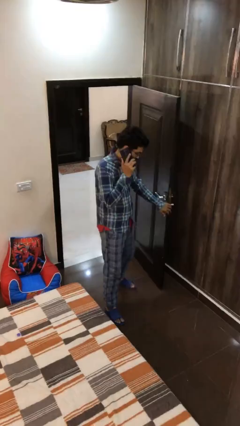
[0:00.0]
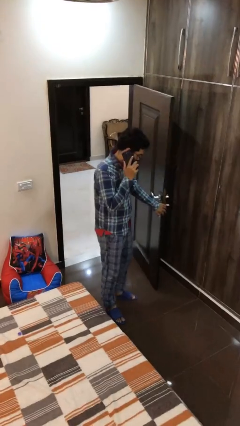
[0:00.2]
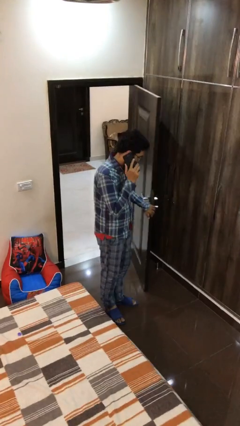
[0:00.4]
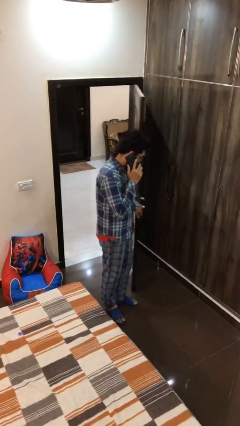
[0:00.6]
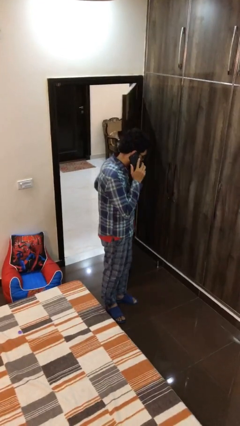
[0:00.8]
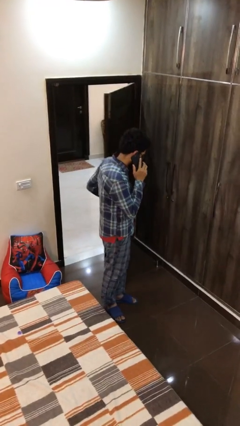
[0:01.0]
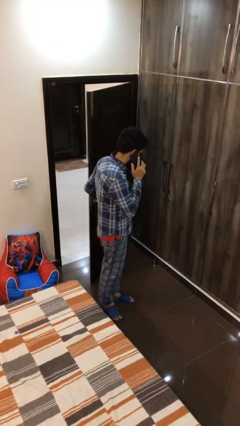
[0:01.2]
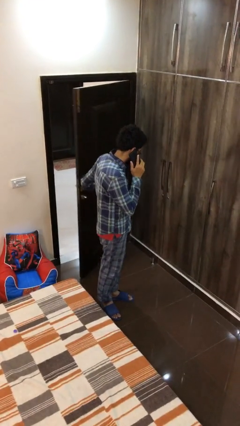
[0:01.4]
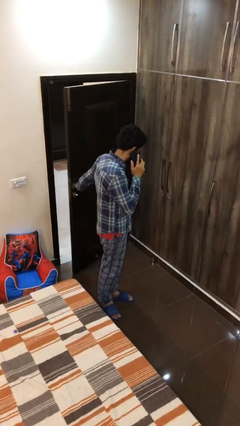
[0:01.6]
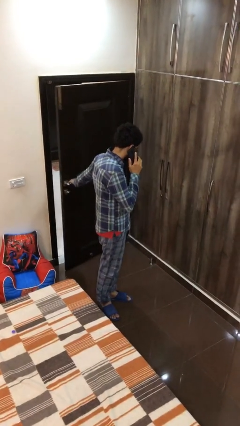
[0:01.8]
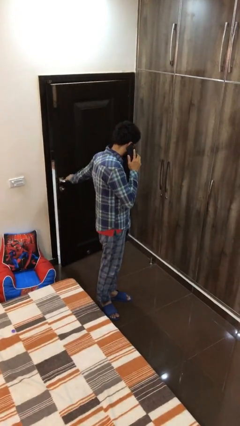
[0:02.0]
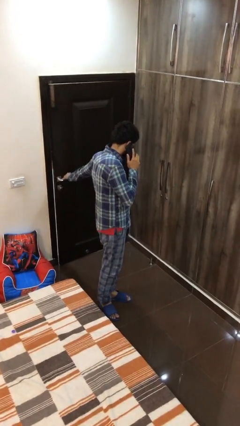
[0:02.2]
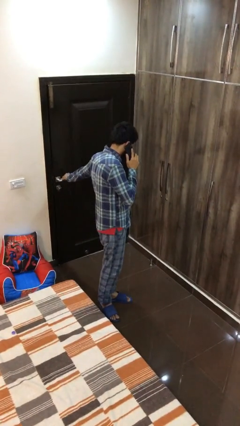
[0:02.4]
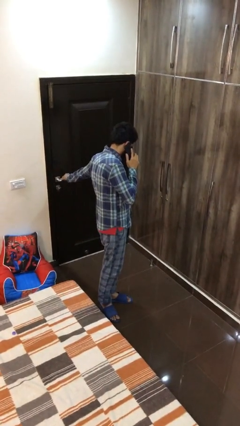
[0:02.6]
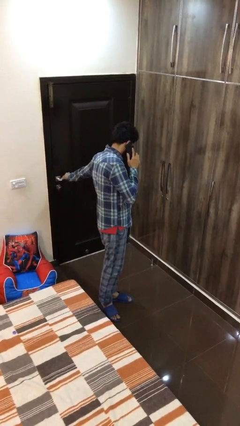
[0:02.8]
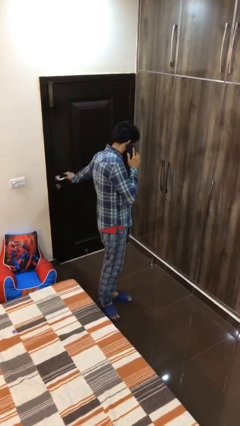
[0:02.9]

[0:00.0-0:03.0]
person closes facility door

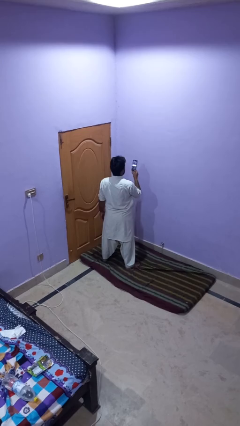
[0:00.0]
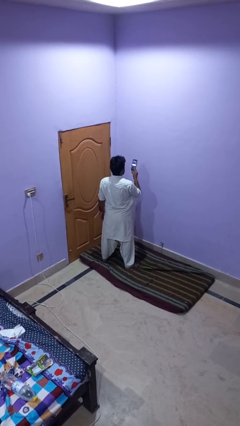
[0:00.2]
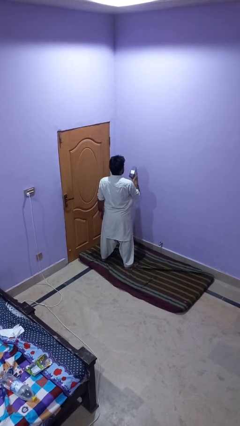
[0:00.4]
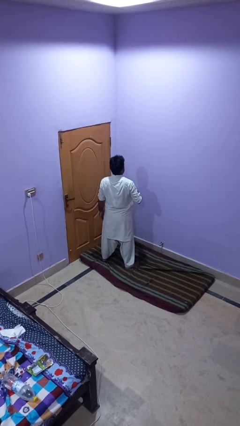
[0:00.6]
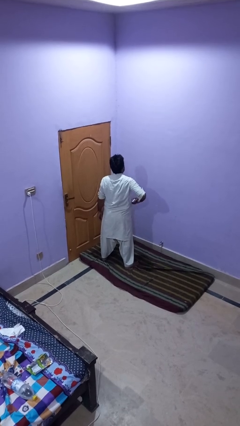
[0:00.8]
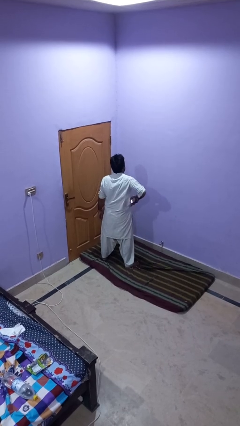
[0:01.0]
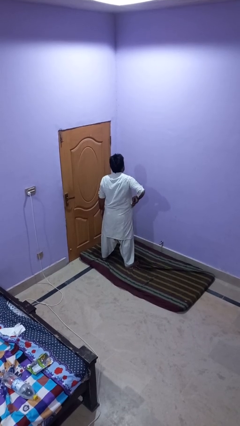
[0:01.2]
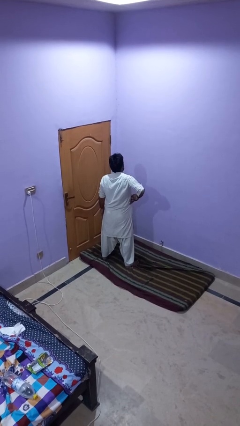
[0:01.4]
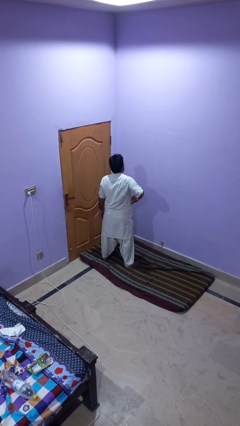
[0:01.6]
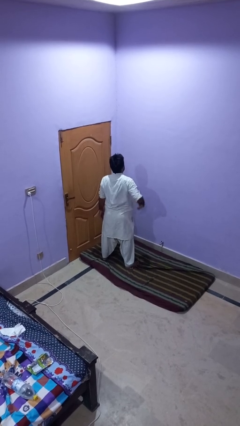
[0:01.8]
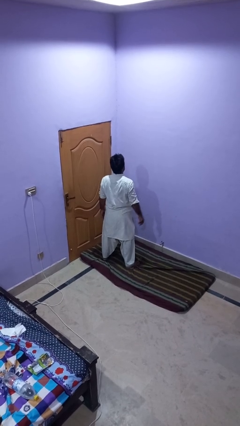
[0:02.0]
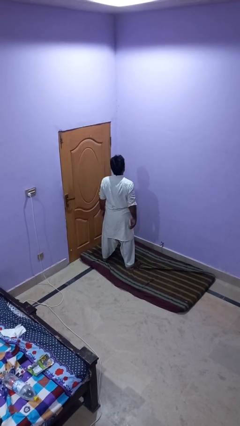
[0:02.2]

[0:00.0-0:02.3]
person puts phone into pocket

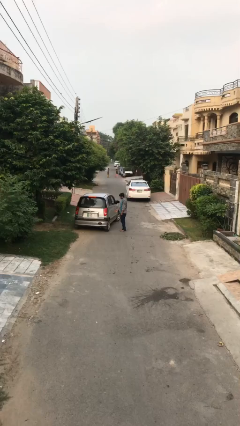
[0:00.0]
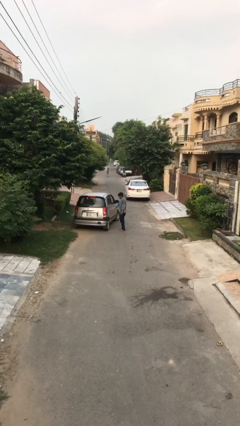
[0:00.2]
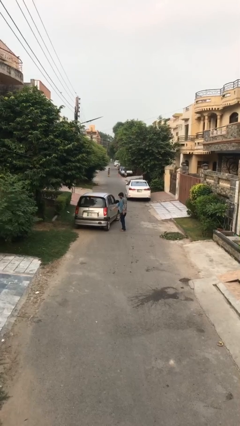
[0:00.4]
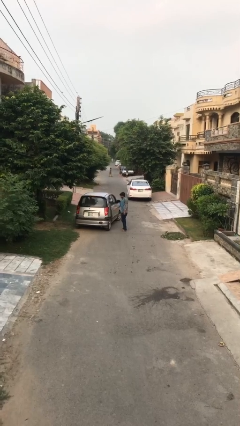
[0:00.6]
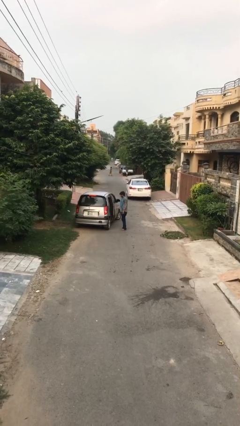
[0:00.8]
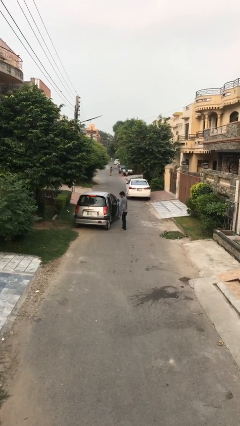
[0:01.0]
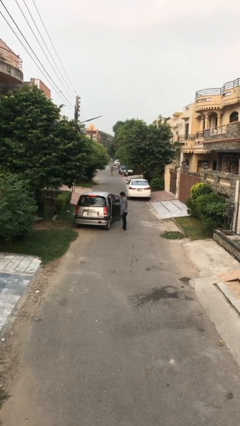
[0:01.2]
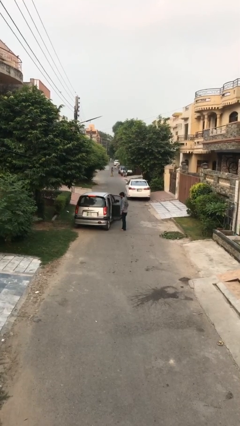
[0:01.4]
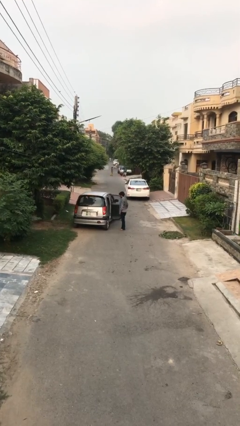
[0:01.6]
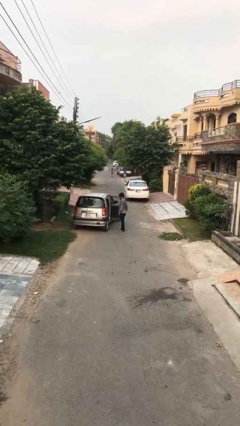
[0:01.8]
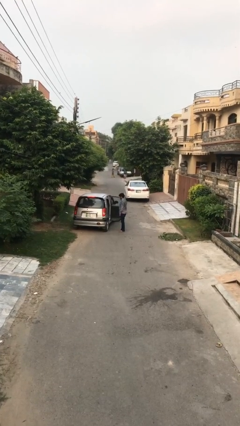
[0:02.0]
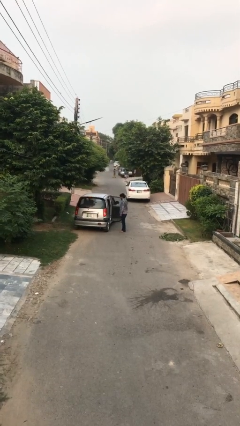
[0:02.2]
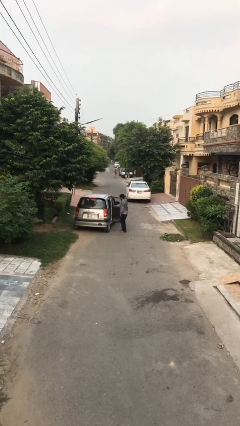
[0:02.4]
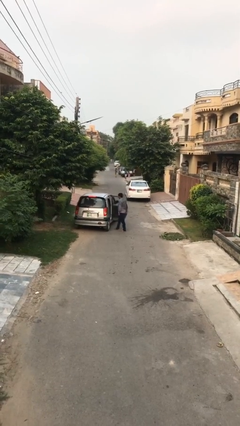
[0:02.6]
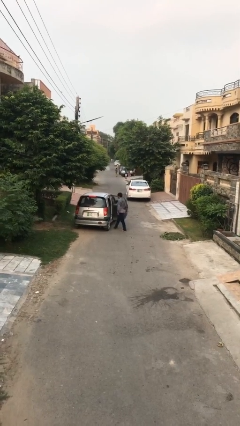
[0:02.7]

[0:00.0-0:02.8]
person opens car door

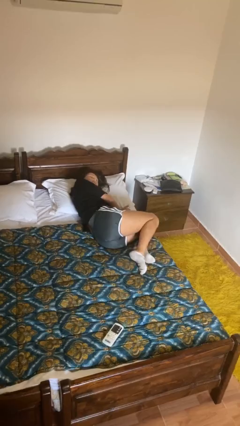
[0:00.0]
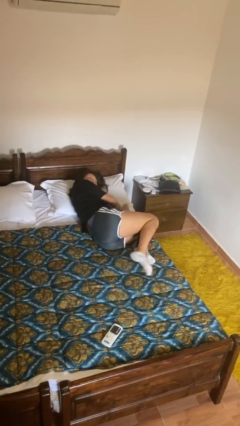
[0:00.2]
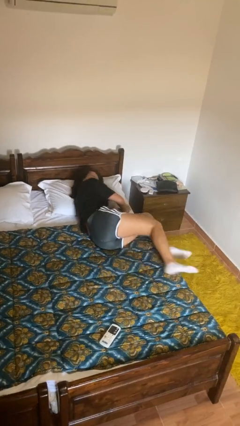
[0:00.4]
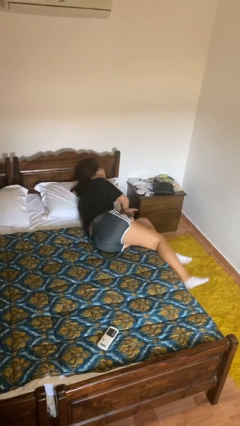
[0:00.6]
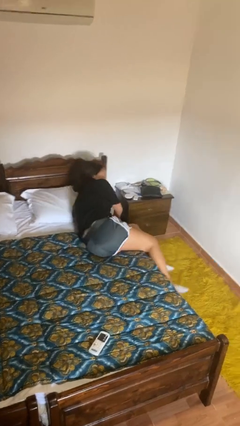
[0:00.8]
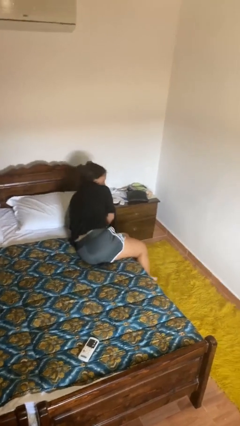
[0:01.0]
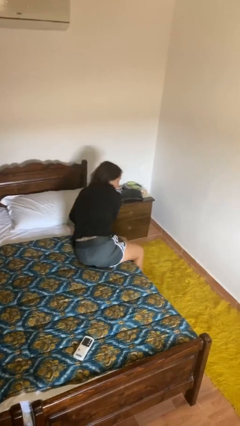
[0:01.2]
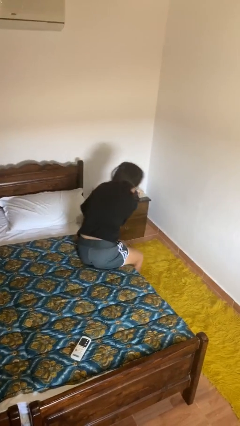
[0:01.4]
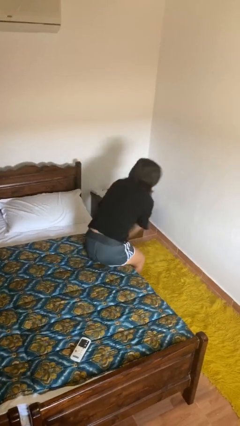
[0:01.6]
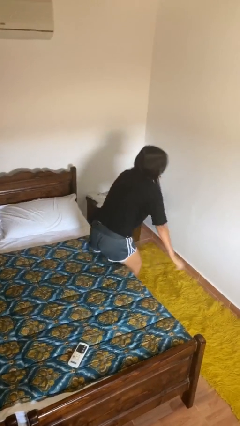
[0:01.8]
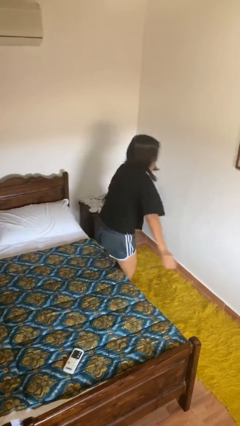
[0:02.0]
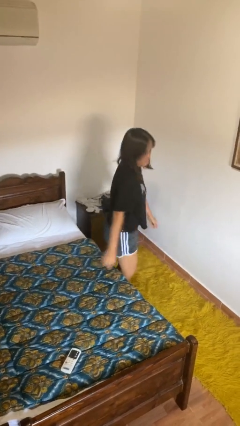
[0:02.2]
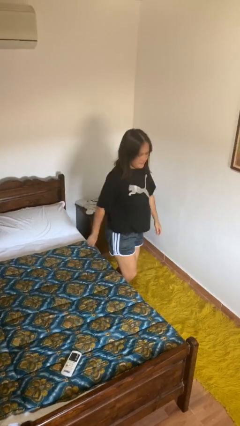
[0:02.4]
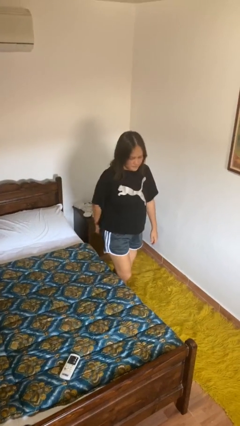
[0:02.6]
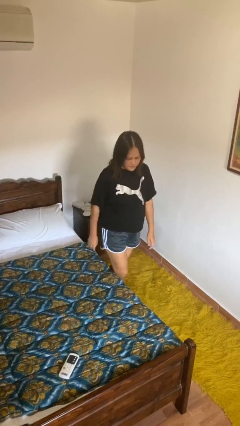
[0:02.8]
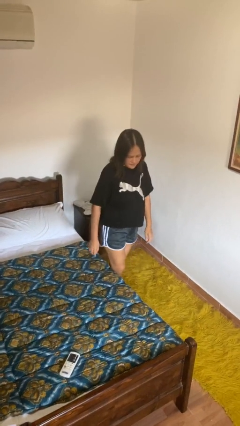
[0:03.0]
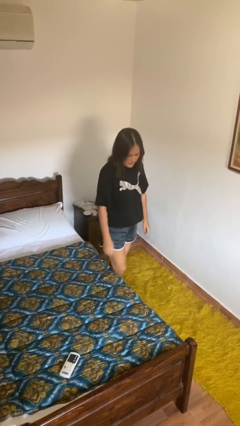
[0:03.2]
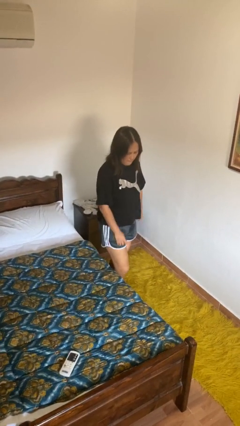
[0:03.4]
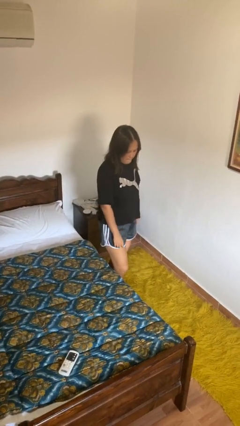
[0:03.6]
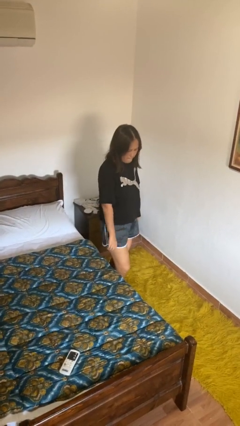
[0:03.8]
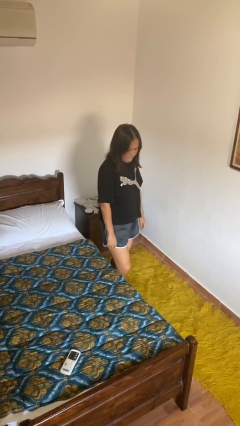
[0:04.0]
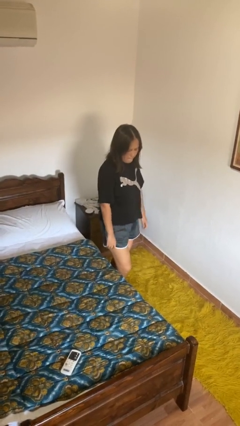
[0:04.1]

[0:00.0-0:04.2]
person stands up

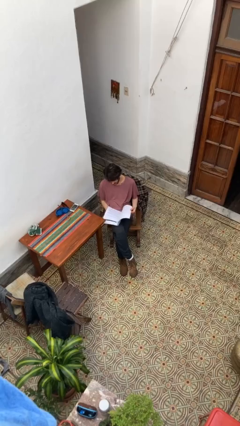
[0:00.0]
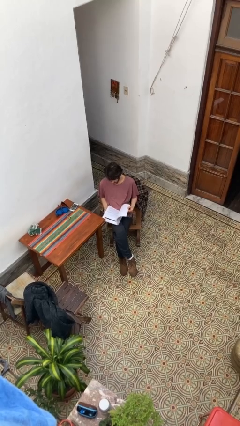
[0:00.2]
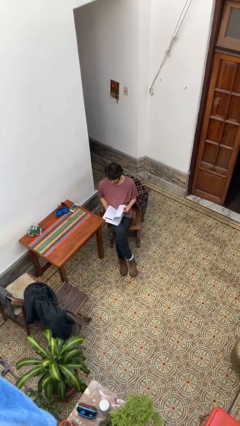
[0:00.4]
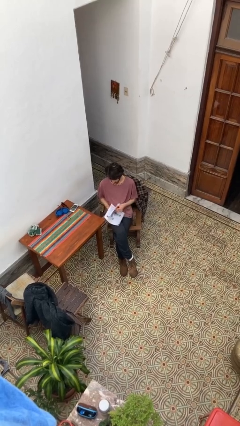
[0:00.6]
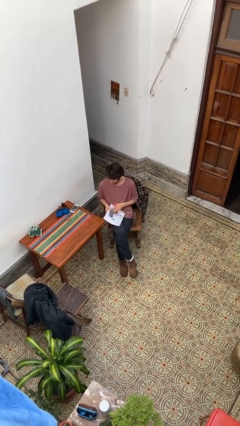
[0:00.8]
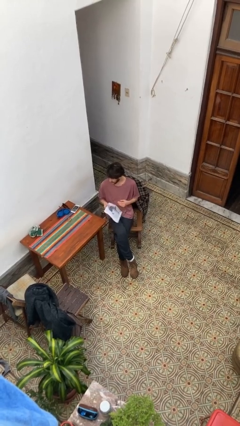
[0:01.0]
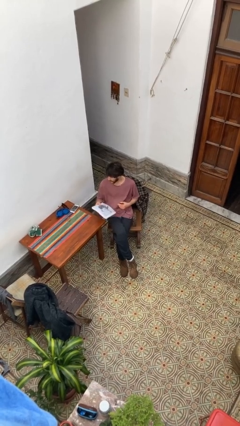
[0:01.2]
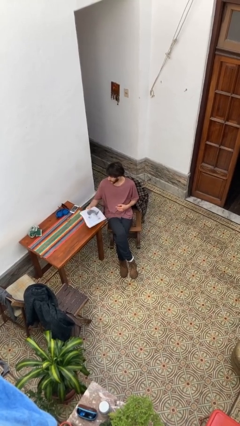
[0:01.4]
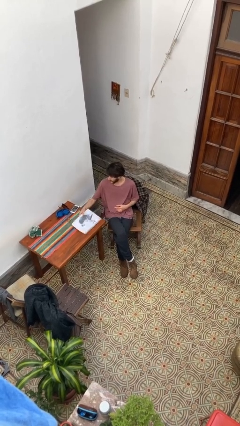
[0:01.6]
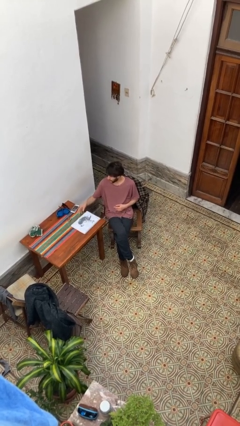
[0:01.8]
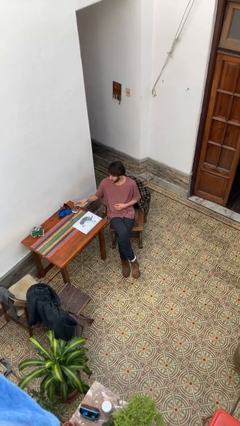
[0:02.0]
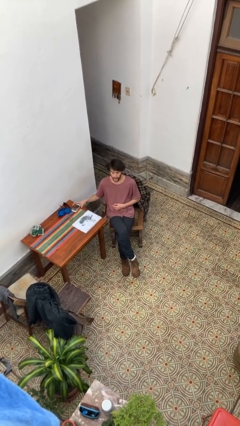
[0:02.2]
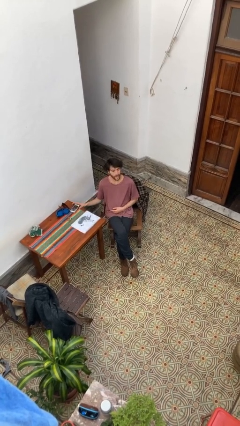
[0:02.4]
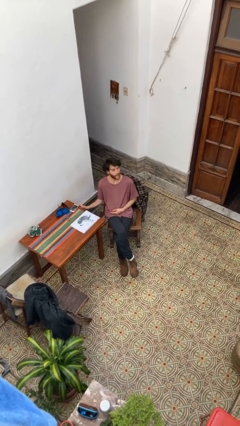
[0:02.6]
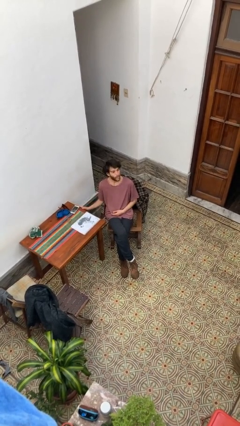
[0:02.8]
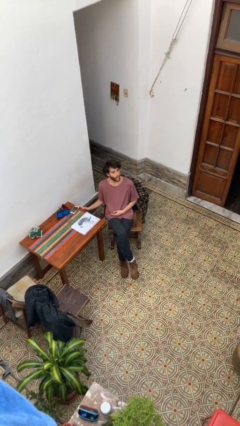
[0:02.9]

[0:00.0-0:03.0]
person puts down object on table

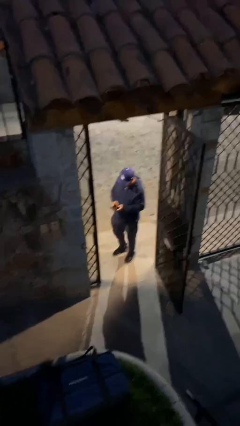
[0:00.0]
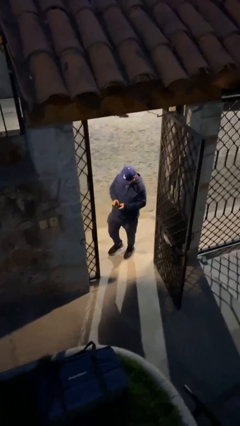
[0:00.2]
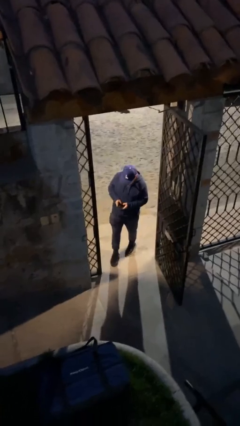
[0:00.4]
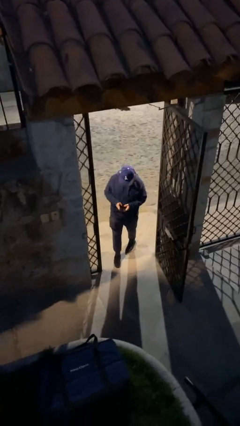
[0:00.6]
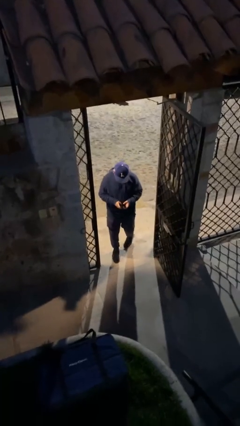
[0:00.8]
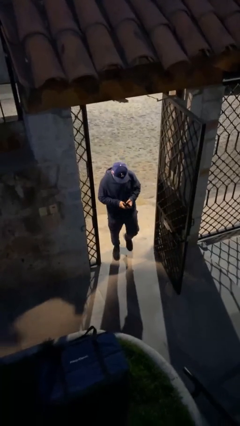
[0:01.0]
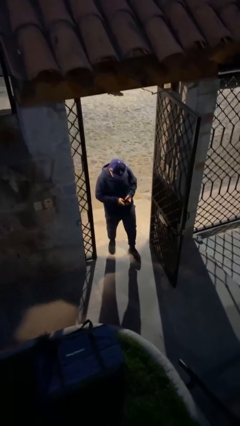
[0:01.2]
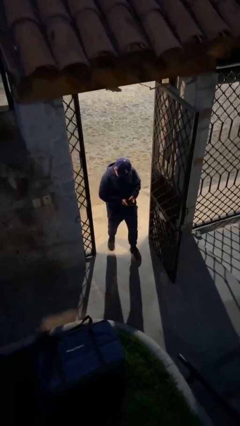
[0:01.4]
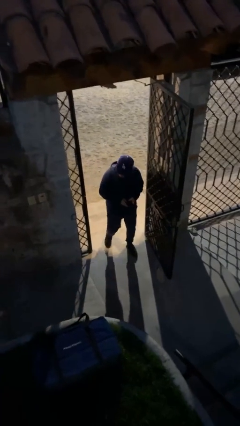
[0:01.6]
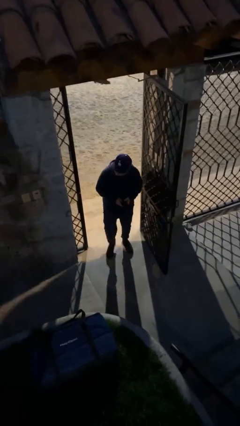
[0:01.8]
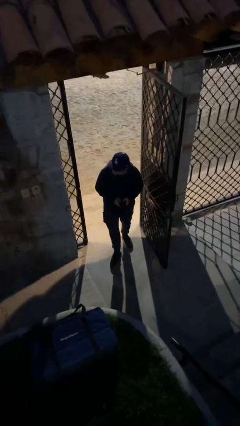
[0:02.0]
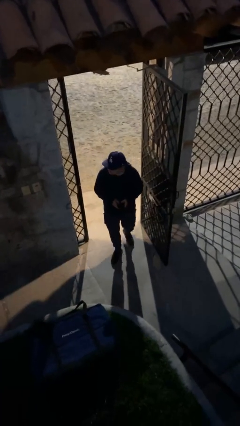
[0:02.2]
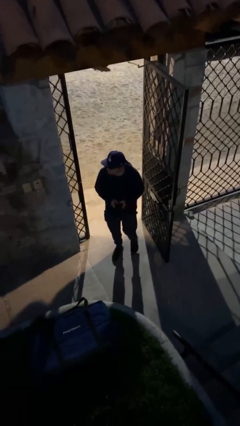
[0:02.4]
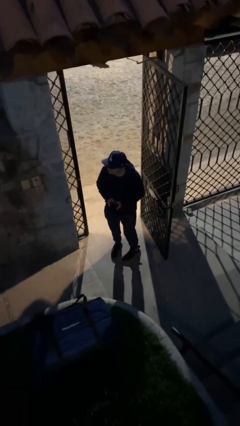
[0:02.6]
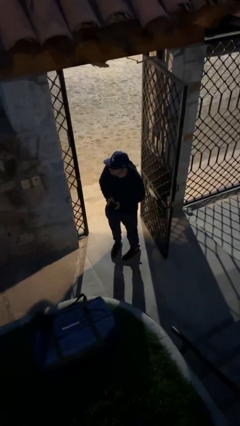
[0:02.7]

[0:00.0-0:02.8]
person enters scene through structure
